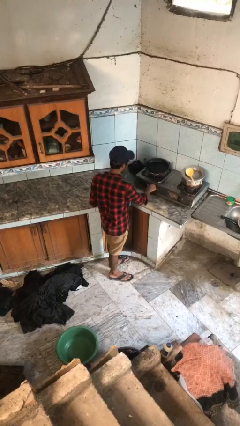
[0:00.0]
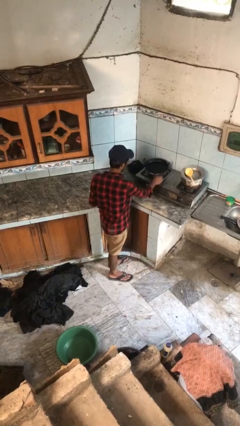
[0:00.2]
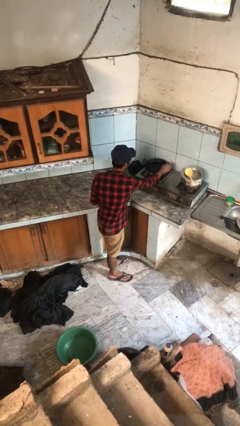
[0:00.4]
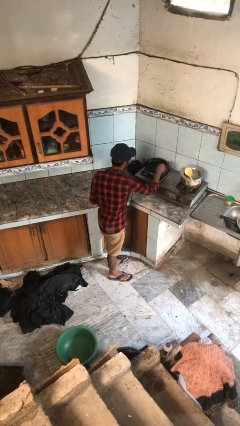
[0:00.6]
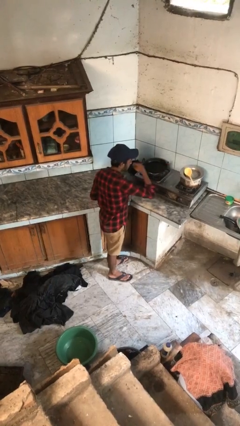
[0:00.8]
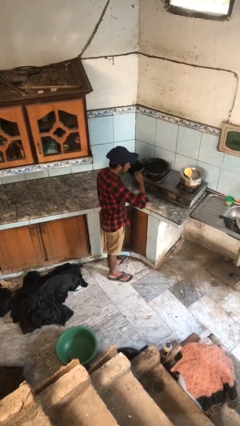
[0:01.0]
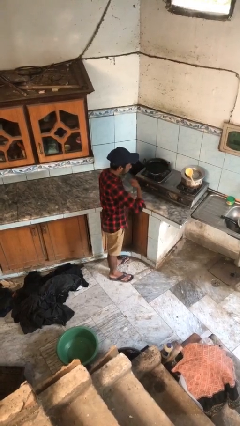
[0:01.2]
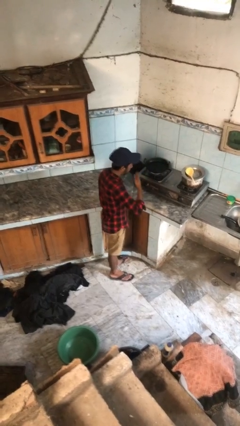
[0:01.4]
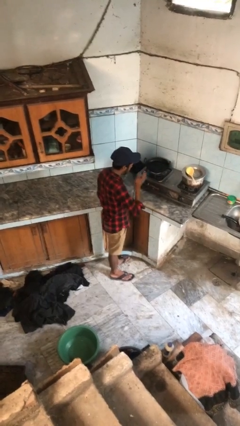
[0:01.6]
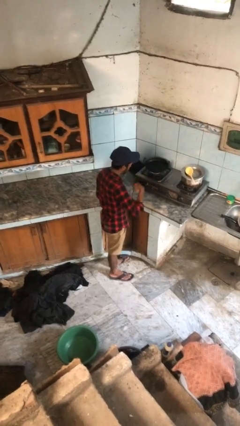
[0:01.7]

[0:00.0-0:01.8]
person burns hand

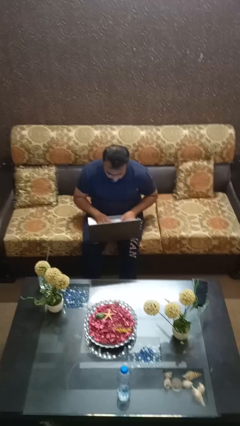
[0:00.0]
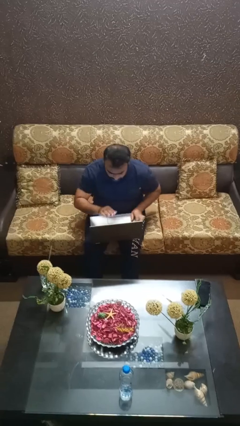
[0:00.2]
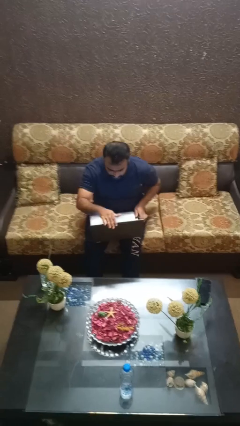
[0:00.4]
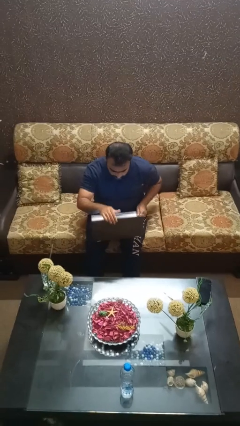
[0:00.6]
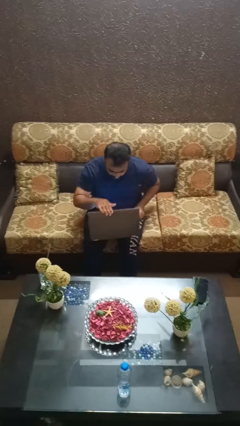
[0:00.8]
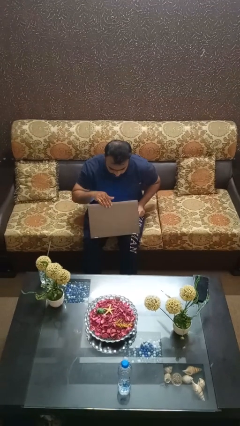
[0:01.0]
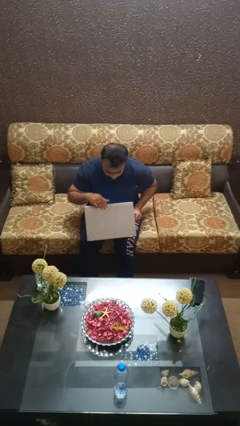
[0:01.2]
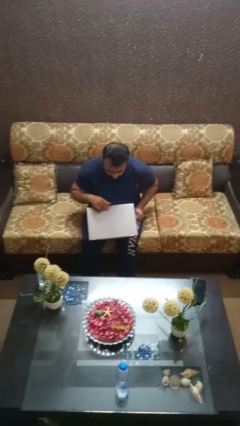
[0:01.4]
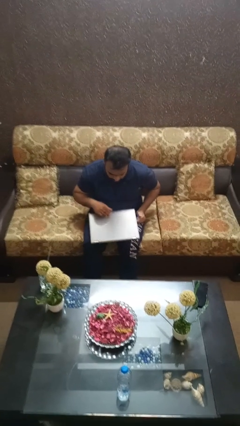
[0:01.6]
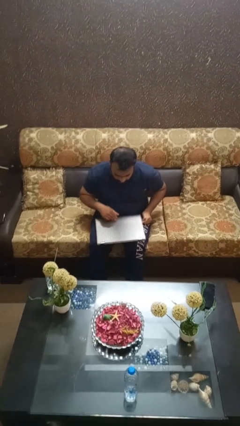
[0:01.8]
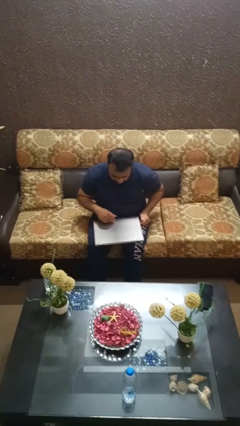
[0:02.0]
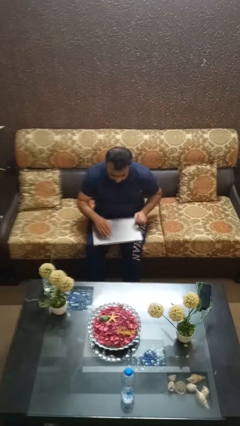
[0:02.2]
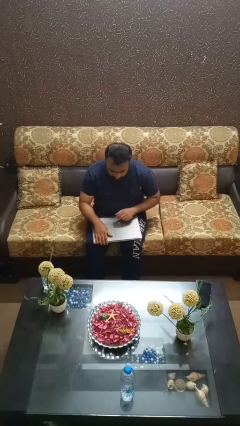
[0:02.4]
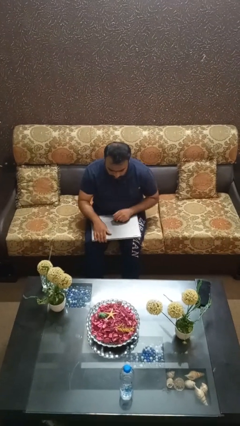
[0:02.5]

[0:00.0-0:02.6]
person closes laptop

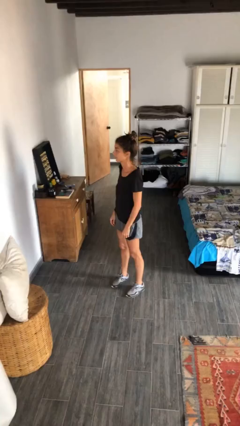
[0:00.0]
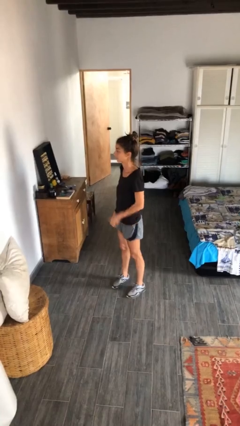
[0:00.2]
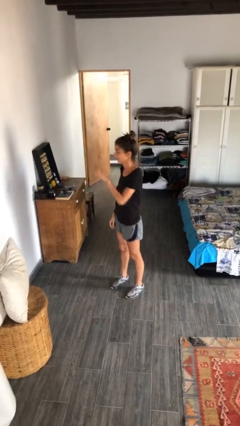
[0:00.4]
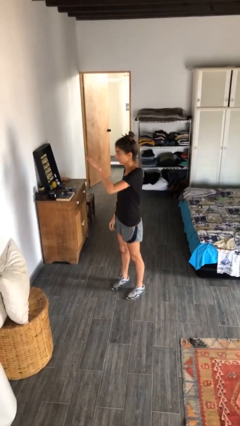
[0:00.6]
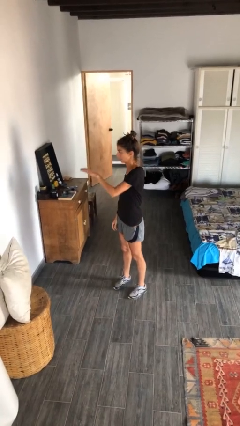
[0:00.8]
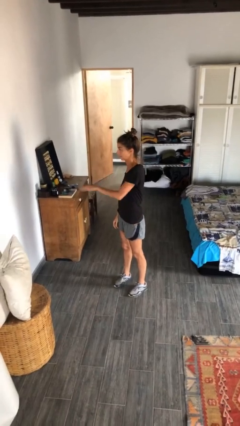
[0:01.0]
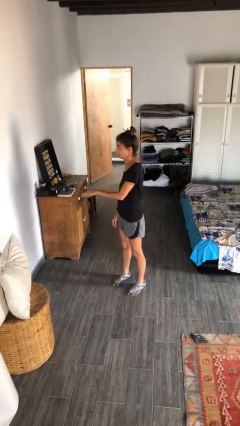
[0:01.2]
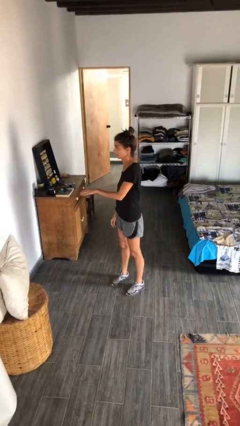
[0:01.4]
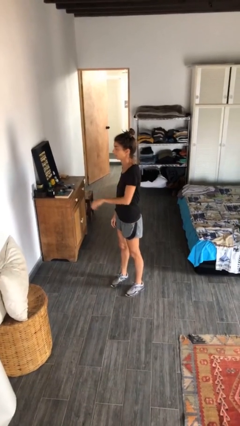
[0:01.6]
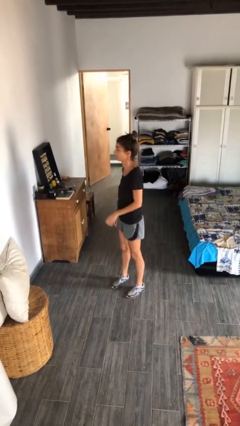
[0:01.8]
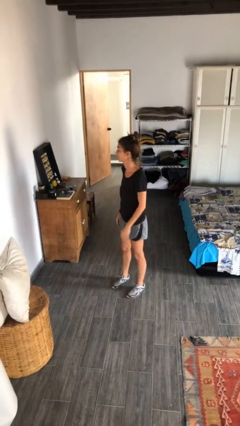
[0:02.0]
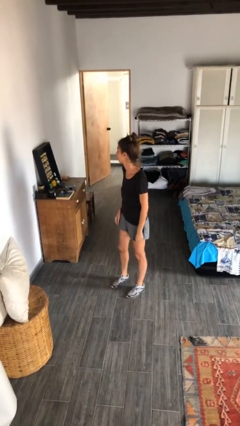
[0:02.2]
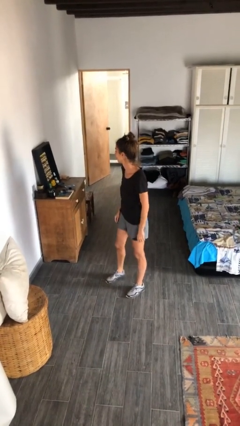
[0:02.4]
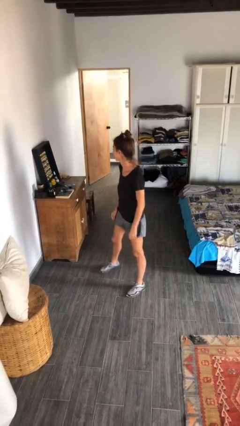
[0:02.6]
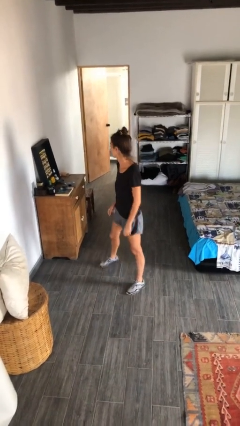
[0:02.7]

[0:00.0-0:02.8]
person gestures swipe down

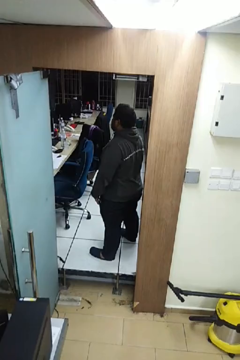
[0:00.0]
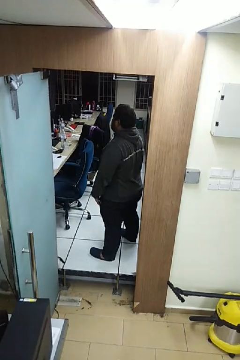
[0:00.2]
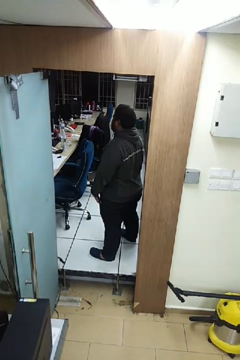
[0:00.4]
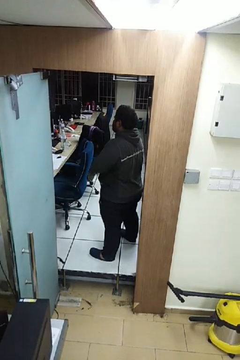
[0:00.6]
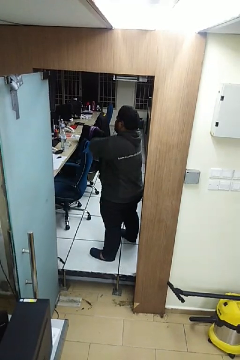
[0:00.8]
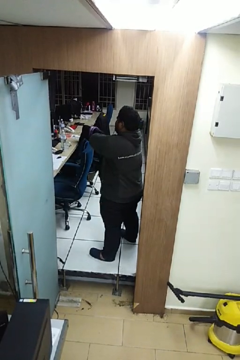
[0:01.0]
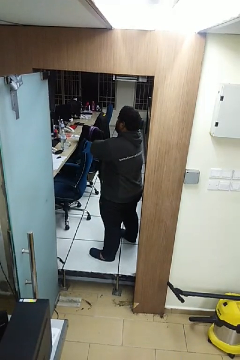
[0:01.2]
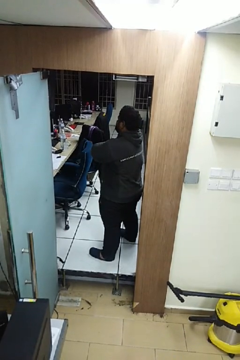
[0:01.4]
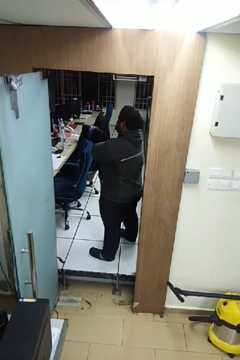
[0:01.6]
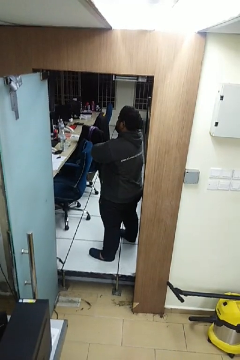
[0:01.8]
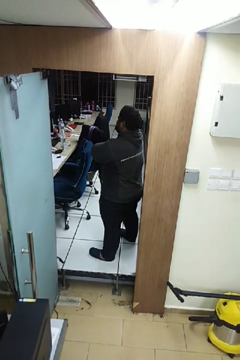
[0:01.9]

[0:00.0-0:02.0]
person crosses arms

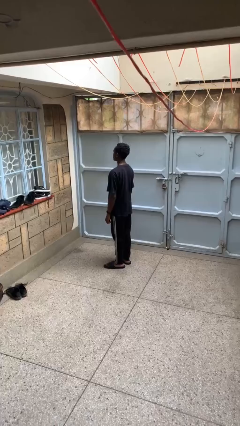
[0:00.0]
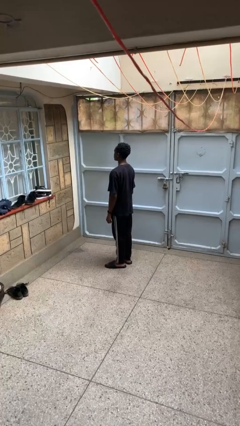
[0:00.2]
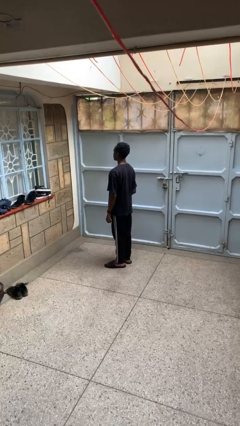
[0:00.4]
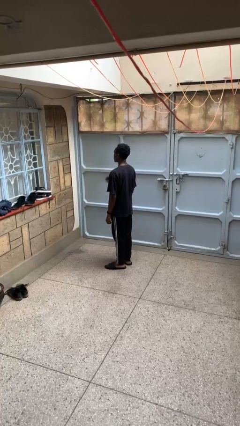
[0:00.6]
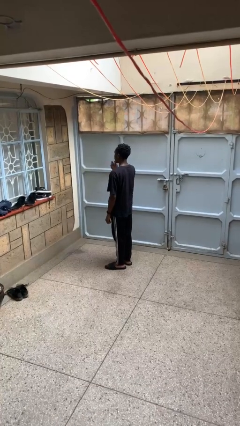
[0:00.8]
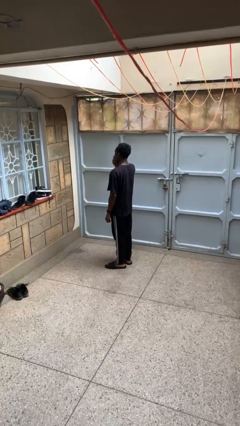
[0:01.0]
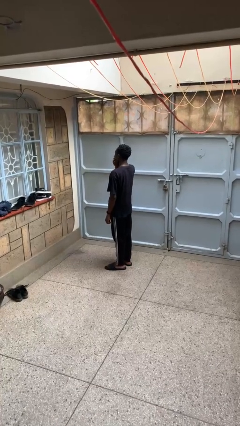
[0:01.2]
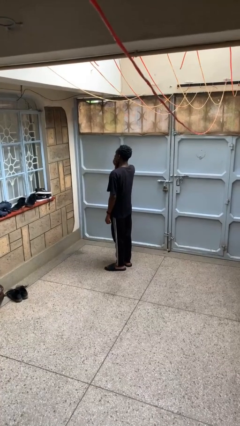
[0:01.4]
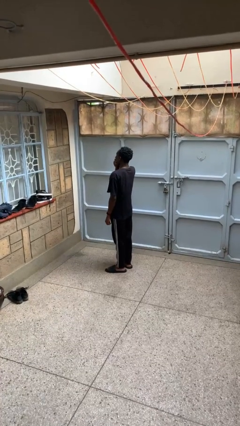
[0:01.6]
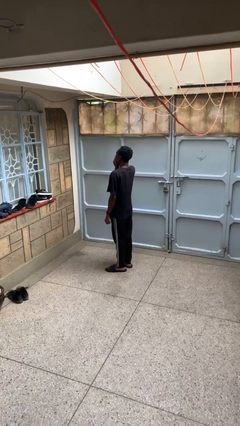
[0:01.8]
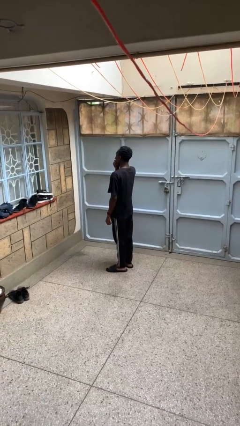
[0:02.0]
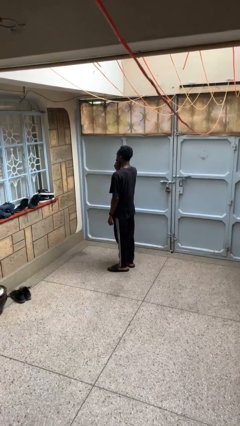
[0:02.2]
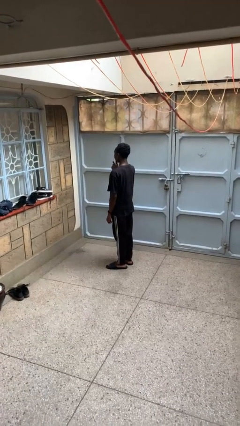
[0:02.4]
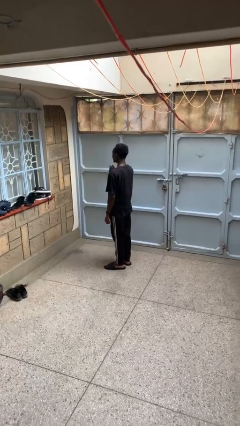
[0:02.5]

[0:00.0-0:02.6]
person yawns

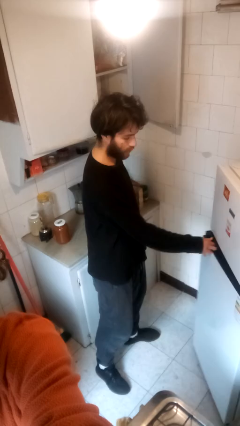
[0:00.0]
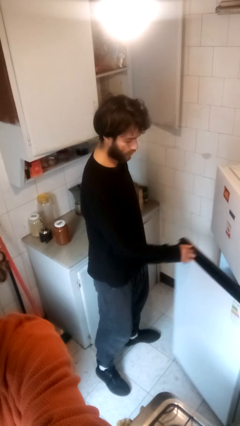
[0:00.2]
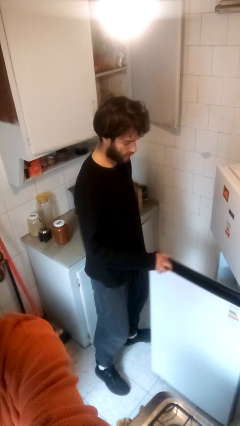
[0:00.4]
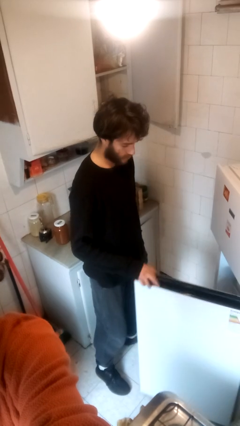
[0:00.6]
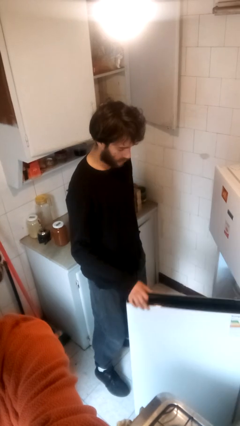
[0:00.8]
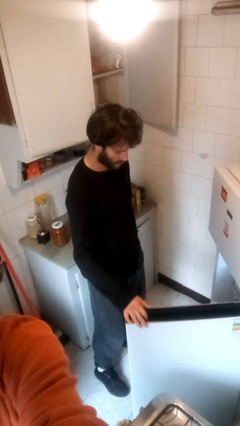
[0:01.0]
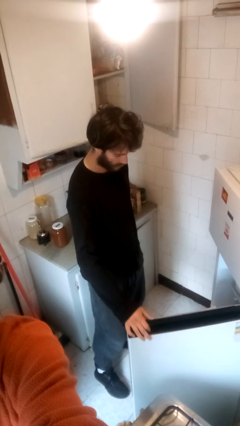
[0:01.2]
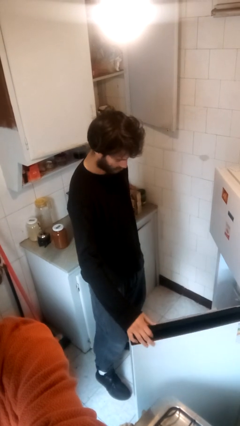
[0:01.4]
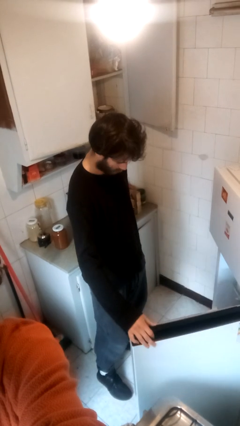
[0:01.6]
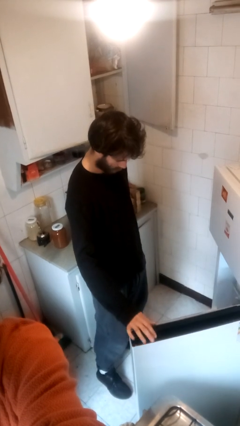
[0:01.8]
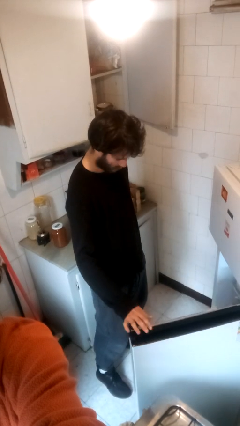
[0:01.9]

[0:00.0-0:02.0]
person opens refrigerator

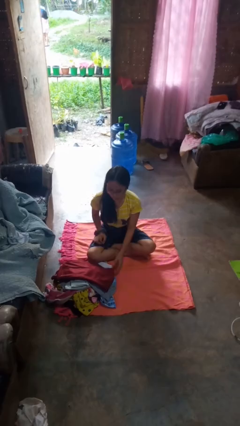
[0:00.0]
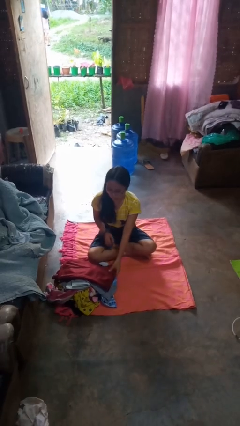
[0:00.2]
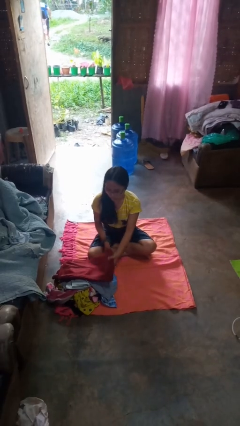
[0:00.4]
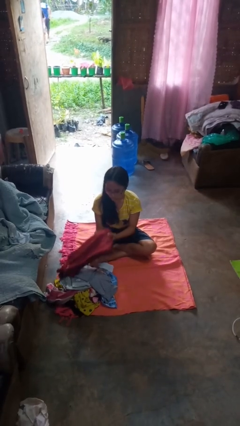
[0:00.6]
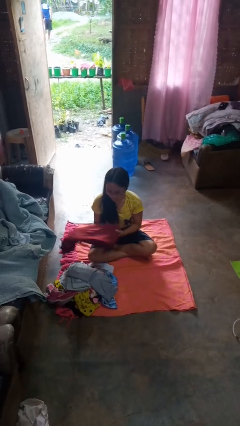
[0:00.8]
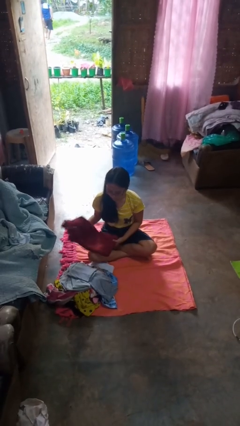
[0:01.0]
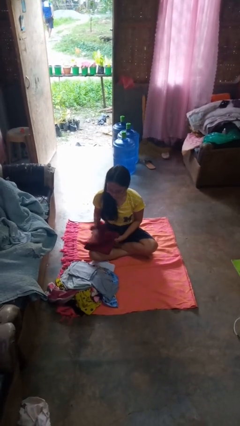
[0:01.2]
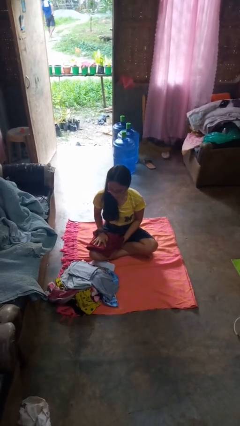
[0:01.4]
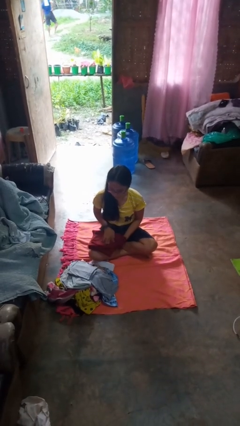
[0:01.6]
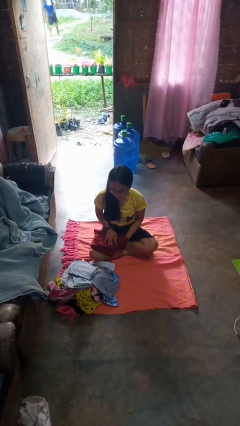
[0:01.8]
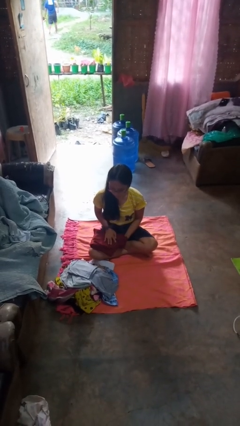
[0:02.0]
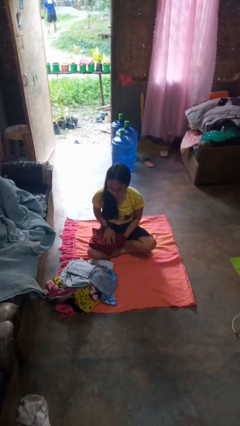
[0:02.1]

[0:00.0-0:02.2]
person folds pants

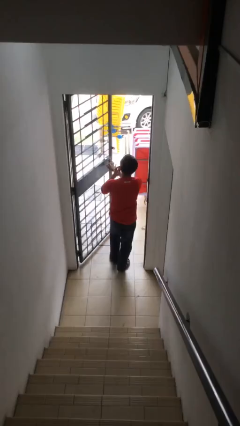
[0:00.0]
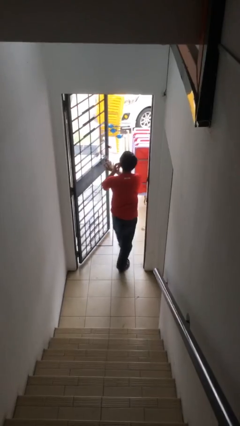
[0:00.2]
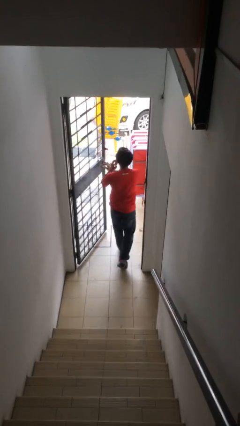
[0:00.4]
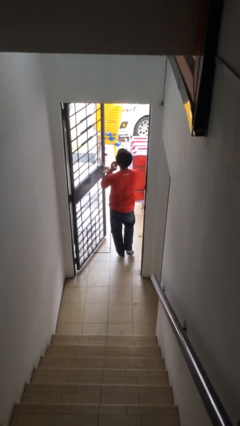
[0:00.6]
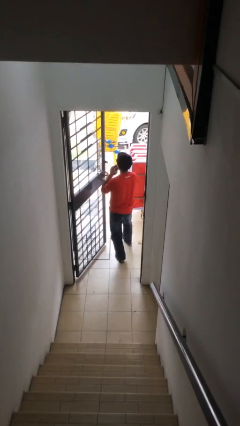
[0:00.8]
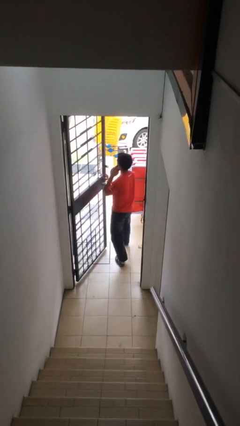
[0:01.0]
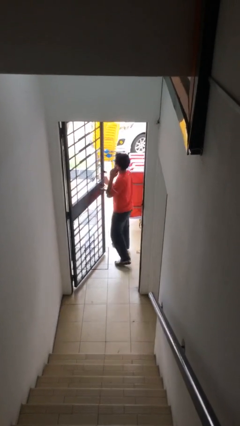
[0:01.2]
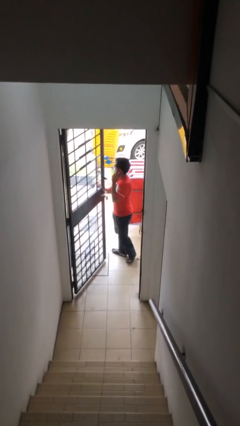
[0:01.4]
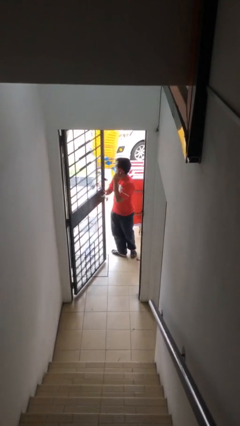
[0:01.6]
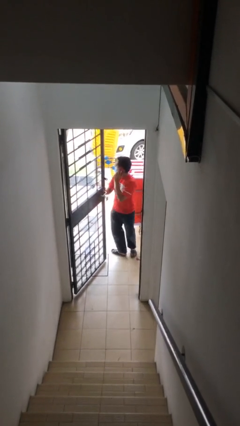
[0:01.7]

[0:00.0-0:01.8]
person exits scene through structure
